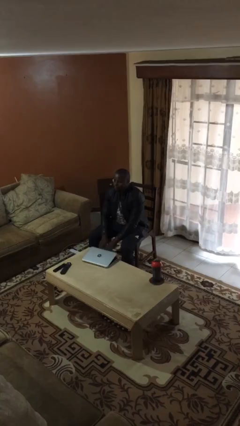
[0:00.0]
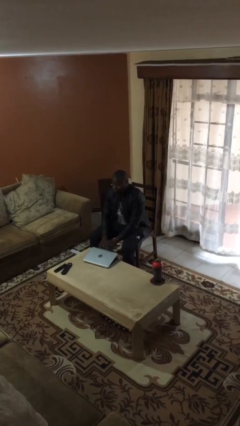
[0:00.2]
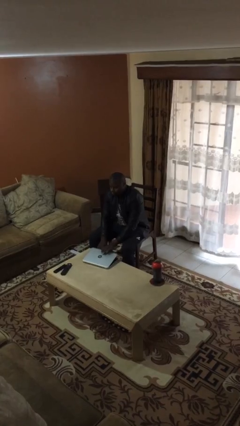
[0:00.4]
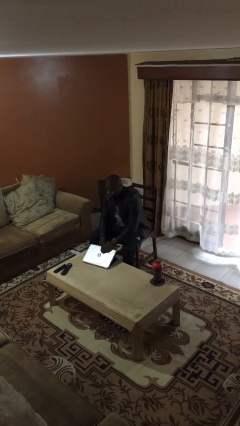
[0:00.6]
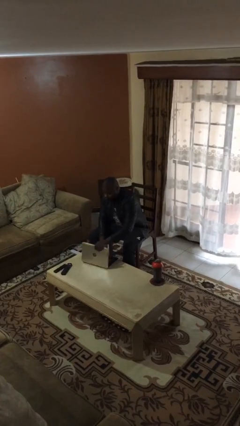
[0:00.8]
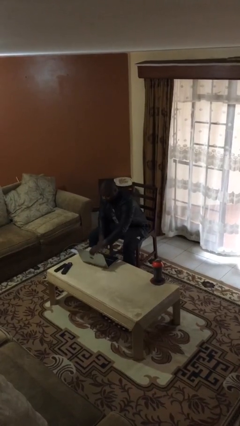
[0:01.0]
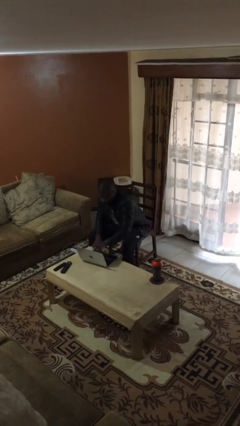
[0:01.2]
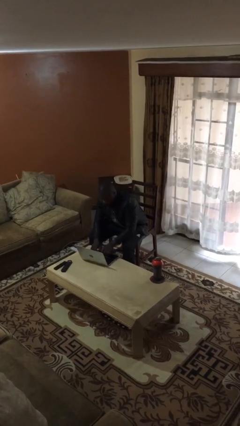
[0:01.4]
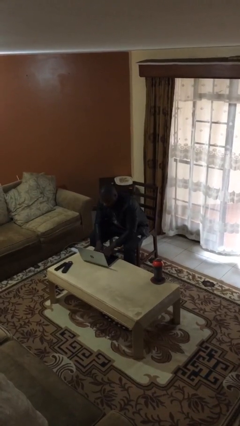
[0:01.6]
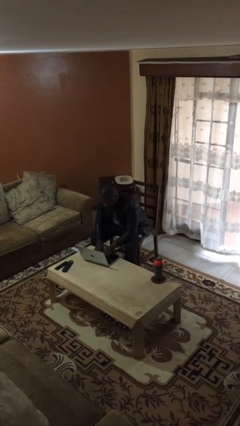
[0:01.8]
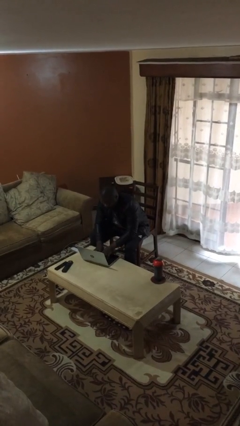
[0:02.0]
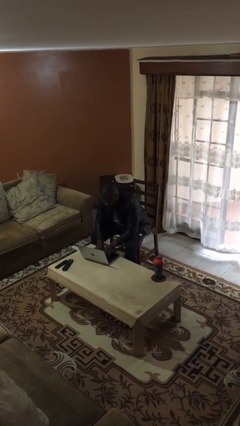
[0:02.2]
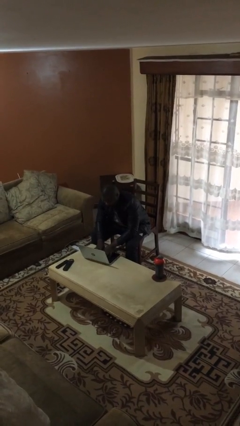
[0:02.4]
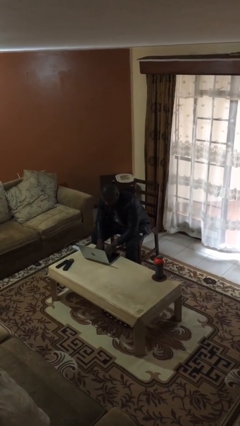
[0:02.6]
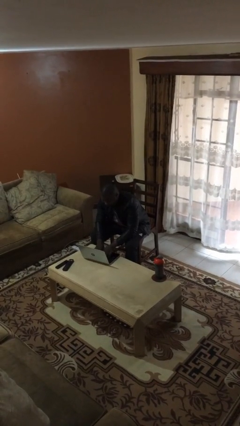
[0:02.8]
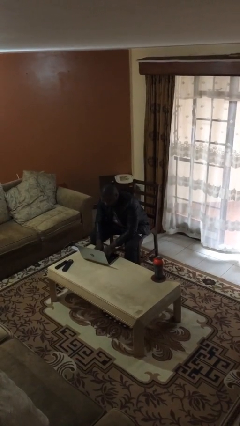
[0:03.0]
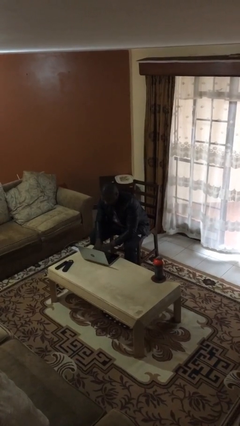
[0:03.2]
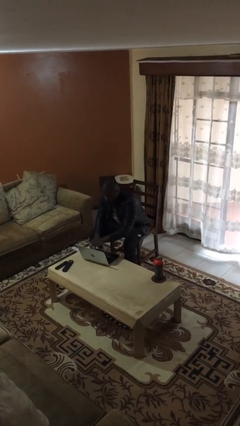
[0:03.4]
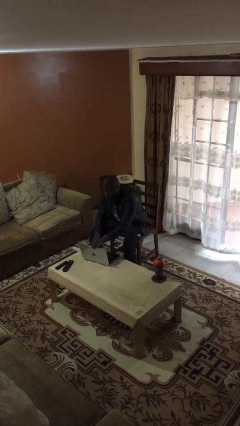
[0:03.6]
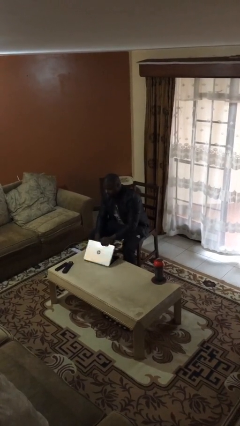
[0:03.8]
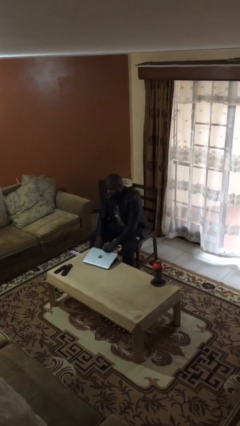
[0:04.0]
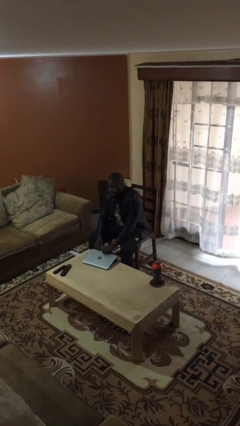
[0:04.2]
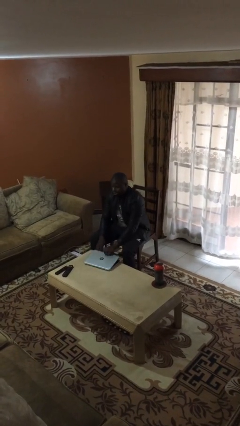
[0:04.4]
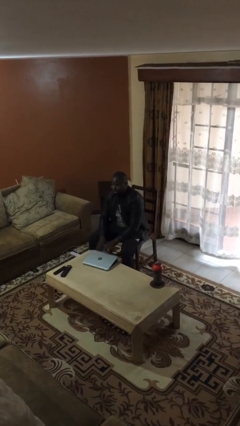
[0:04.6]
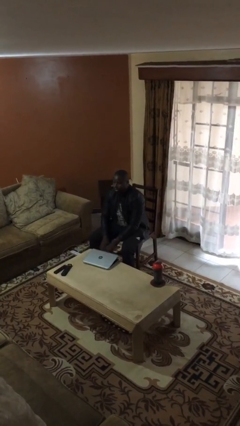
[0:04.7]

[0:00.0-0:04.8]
person interacts with laptop

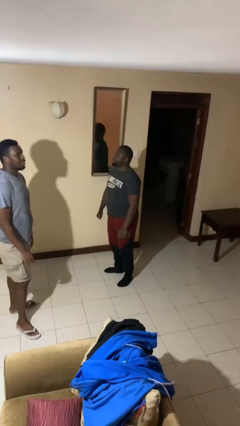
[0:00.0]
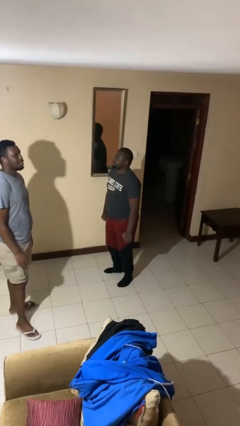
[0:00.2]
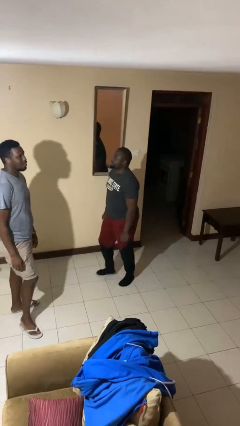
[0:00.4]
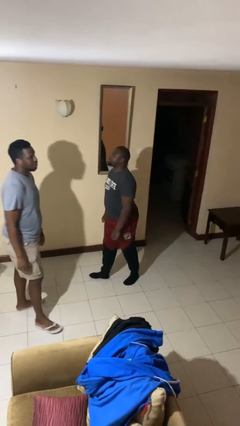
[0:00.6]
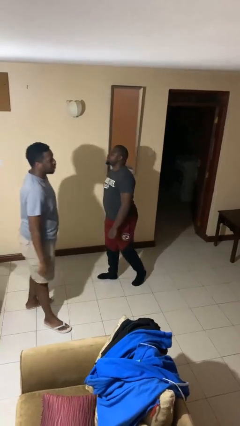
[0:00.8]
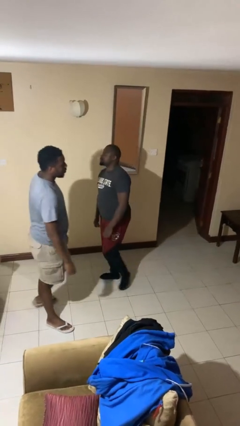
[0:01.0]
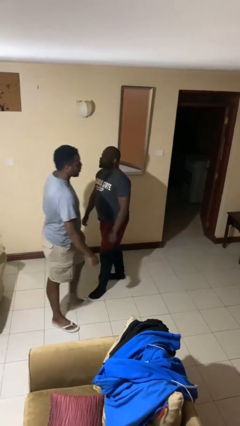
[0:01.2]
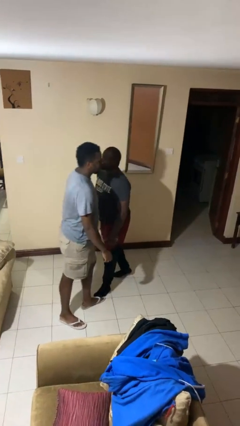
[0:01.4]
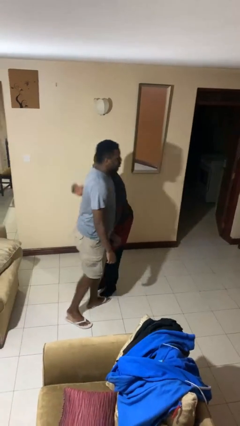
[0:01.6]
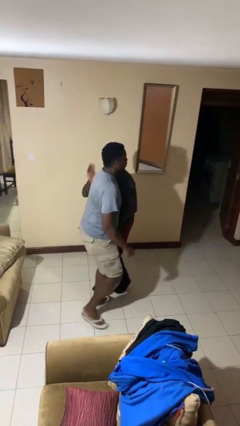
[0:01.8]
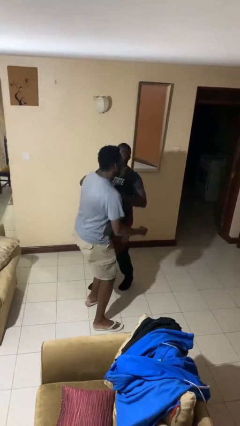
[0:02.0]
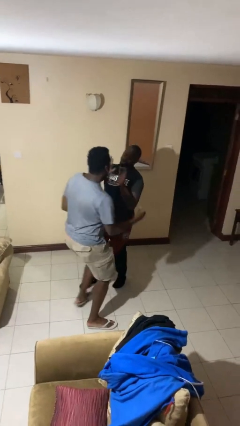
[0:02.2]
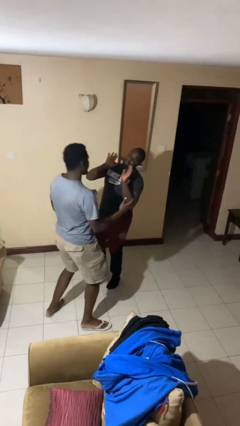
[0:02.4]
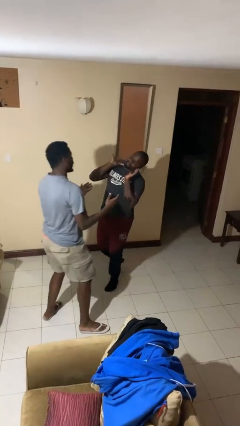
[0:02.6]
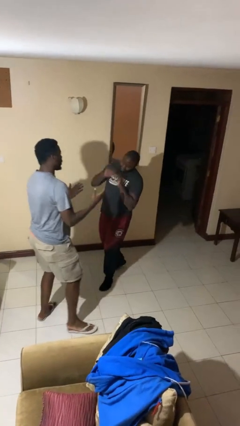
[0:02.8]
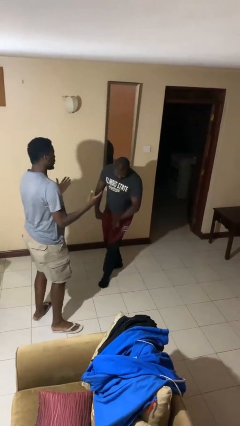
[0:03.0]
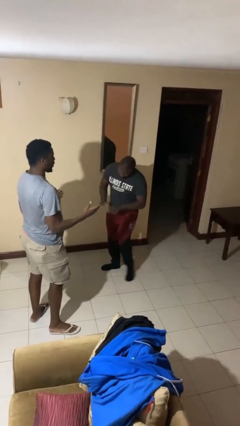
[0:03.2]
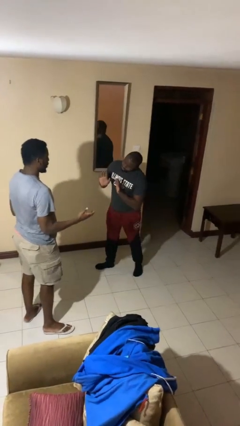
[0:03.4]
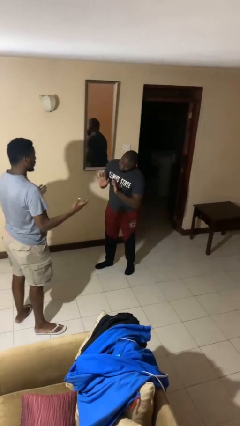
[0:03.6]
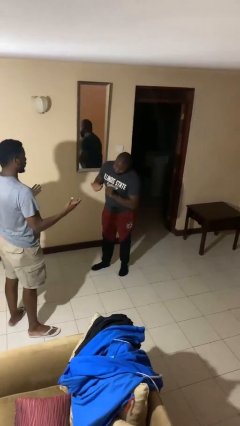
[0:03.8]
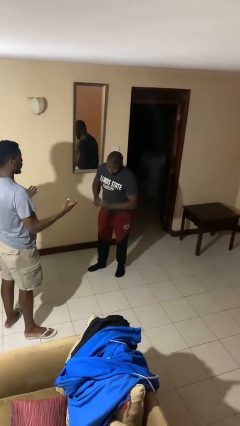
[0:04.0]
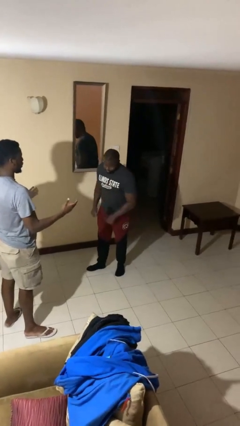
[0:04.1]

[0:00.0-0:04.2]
person bumps into person

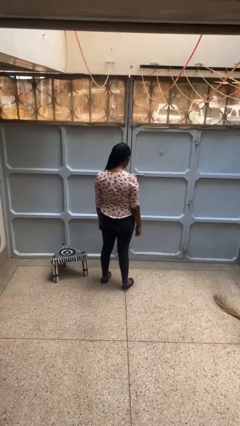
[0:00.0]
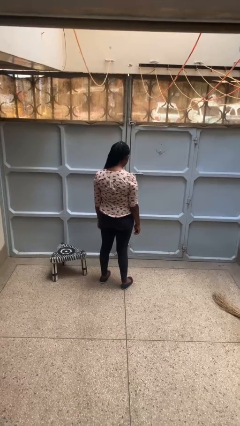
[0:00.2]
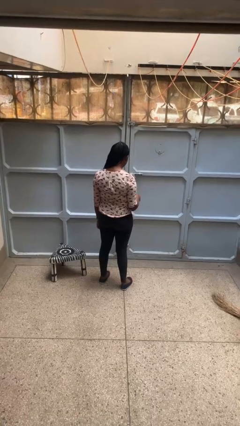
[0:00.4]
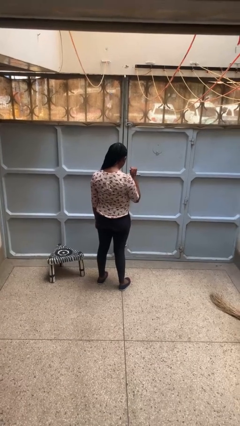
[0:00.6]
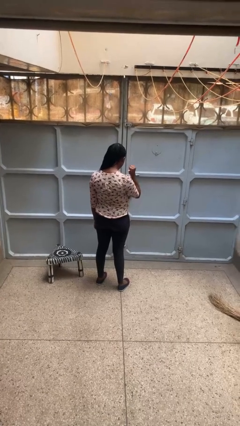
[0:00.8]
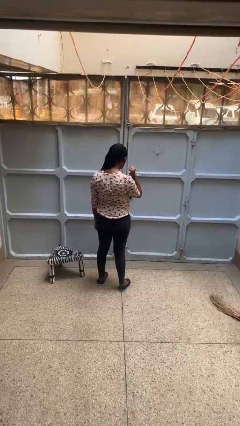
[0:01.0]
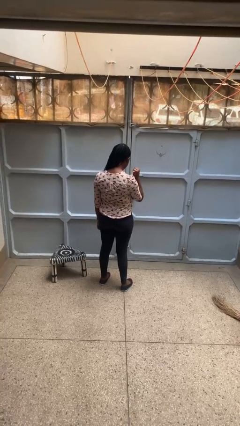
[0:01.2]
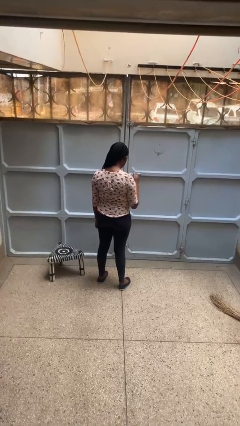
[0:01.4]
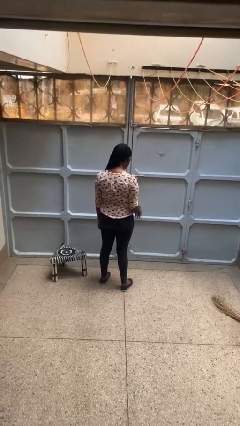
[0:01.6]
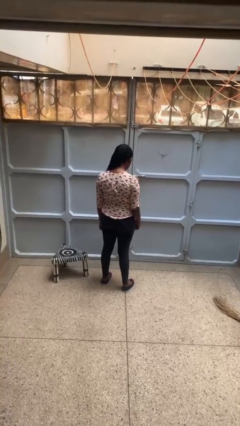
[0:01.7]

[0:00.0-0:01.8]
person gestures behind me

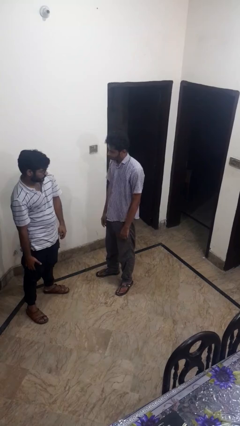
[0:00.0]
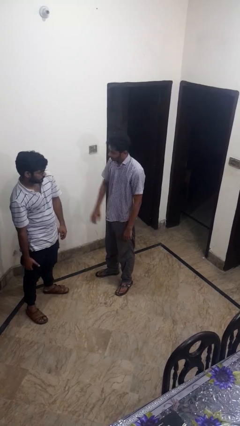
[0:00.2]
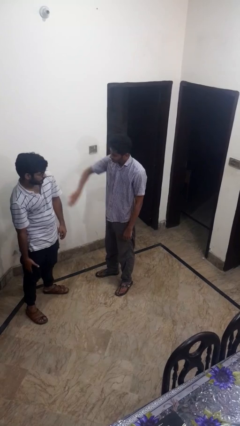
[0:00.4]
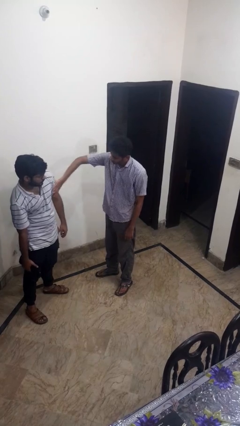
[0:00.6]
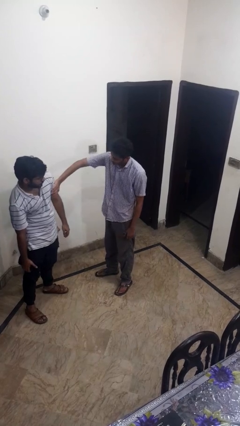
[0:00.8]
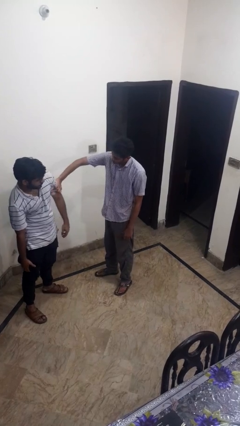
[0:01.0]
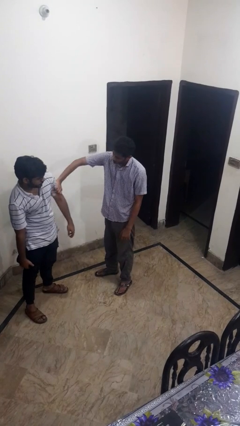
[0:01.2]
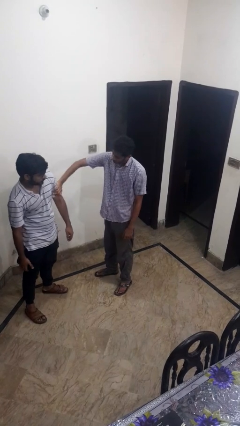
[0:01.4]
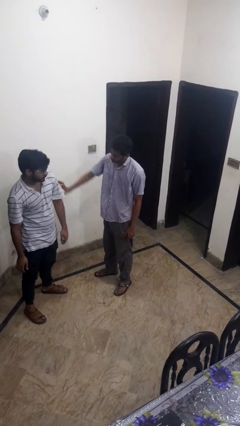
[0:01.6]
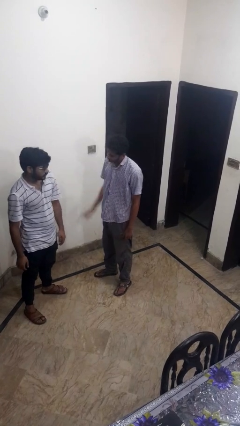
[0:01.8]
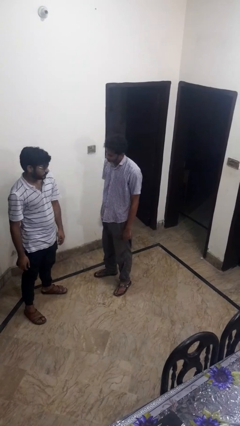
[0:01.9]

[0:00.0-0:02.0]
person grabs person by bicep

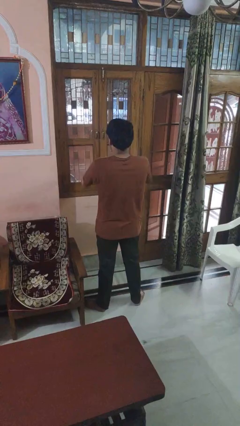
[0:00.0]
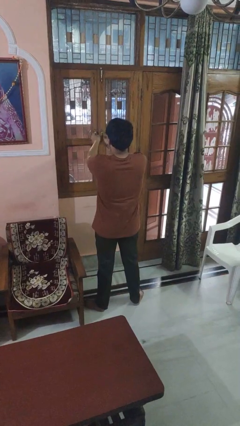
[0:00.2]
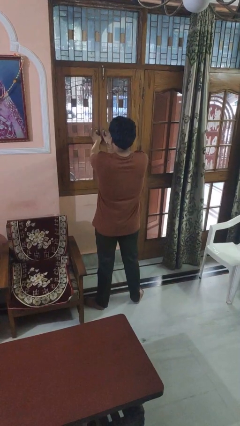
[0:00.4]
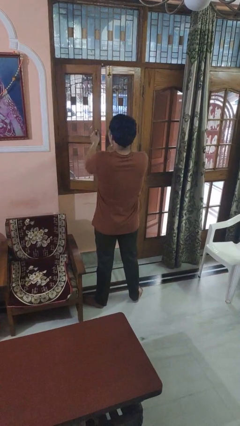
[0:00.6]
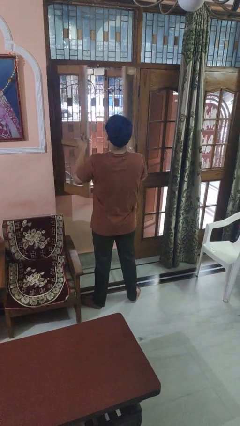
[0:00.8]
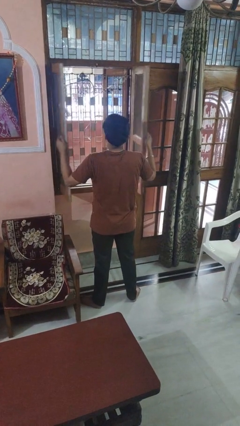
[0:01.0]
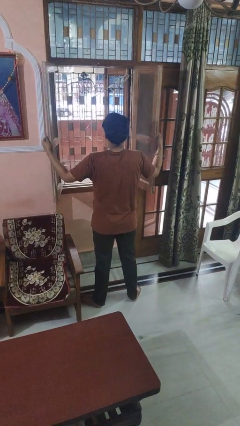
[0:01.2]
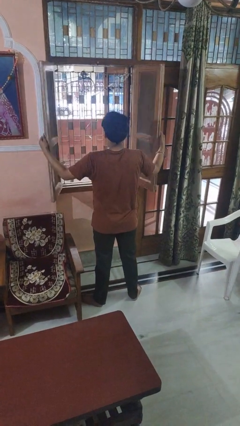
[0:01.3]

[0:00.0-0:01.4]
person opens home window

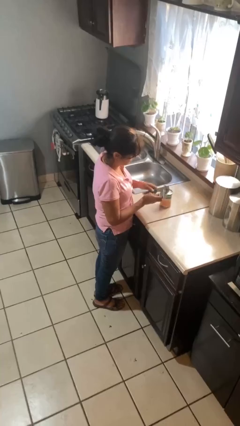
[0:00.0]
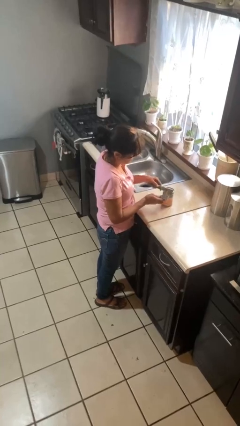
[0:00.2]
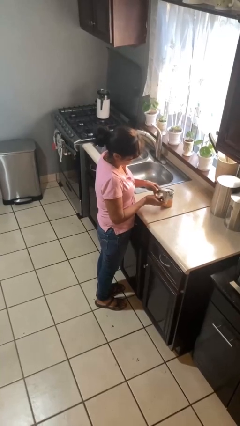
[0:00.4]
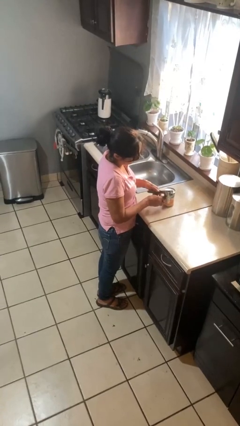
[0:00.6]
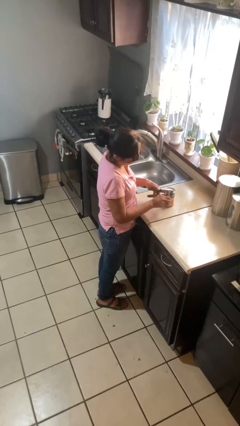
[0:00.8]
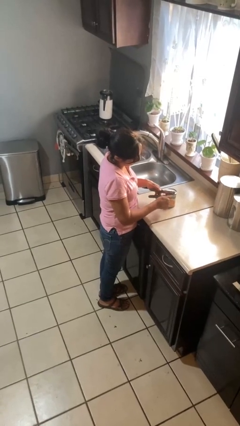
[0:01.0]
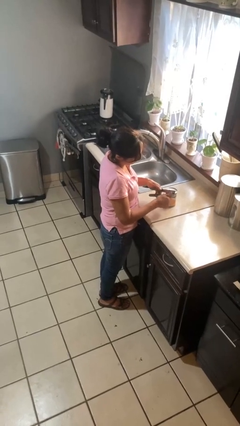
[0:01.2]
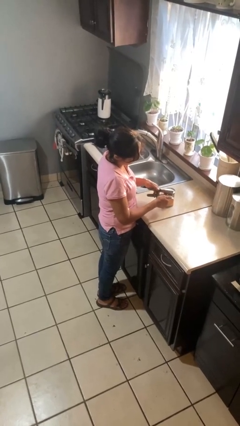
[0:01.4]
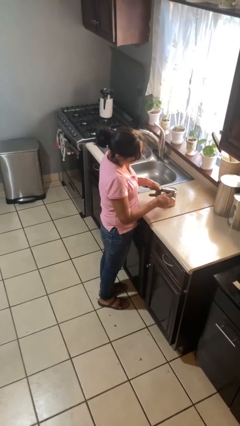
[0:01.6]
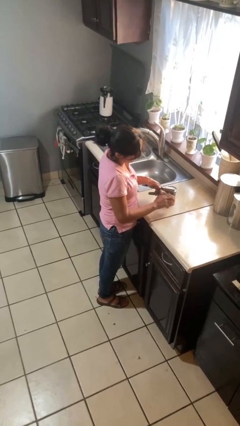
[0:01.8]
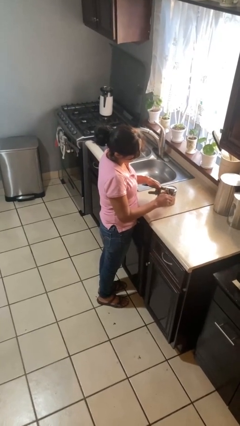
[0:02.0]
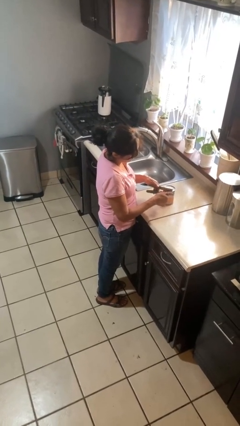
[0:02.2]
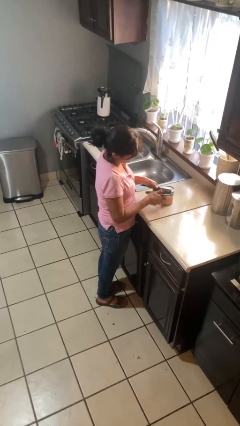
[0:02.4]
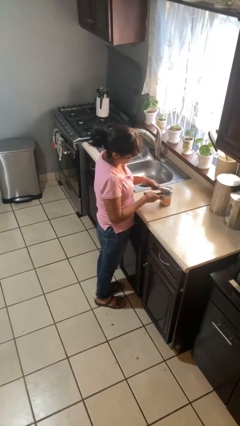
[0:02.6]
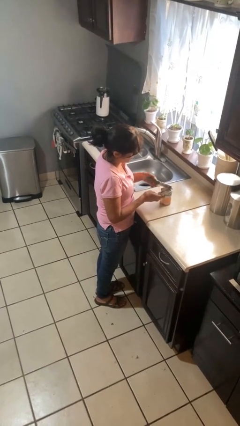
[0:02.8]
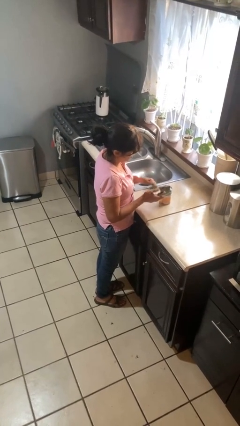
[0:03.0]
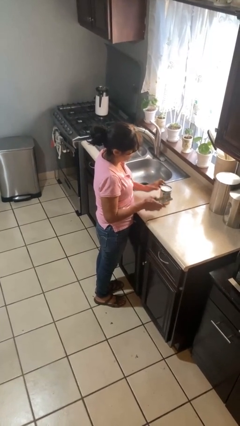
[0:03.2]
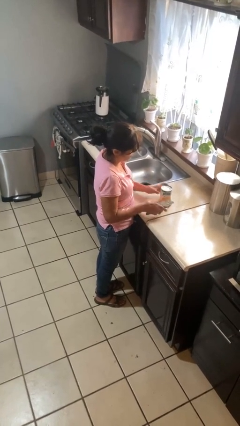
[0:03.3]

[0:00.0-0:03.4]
person opens can with can opener
